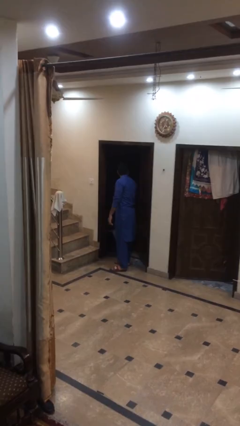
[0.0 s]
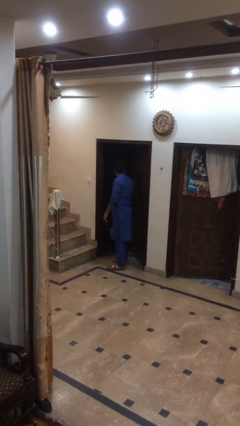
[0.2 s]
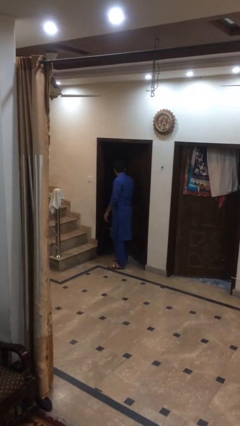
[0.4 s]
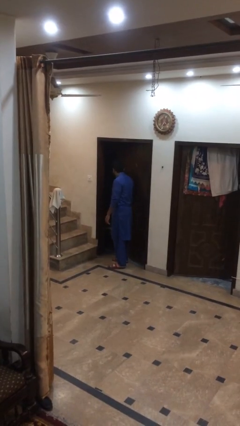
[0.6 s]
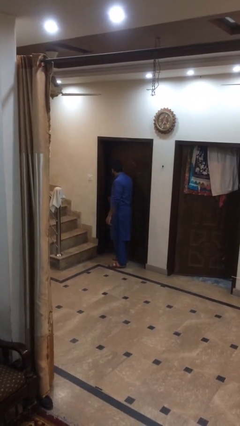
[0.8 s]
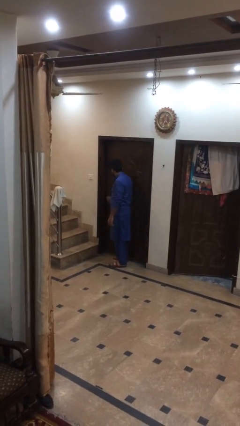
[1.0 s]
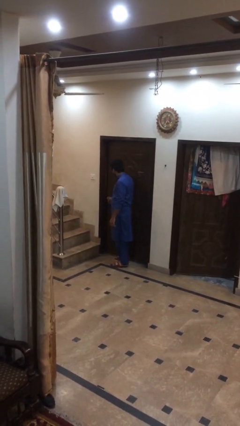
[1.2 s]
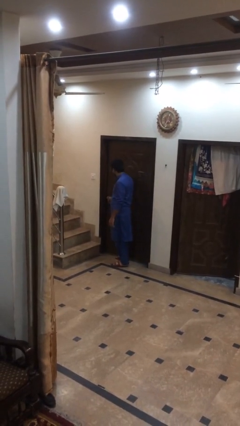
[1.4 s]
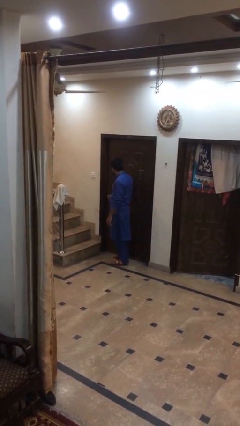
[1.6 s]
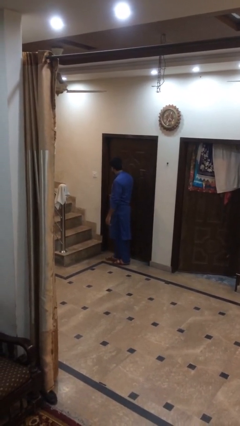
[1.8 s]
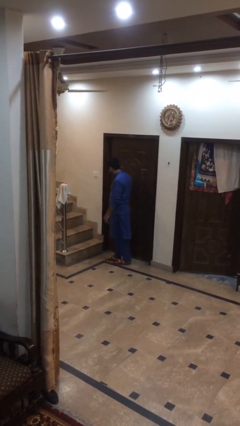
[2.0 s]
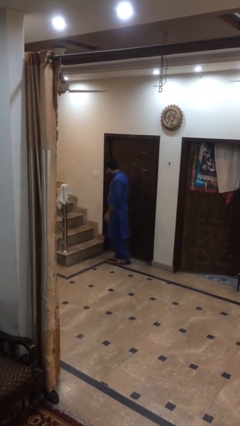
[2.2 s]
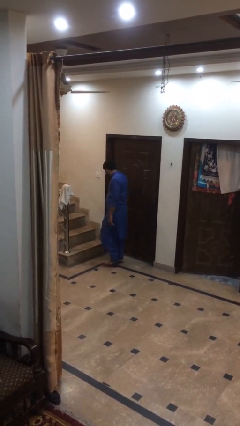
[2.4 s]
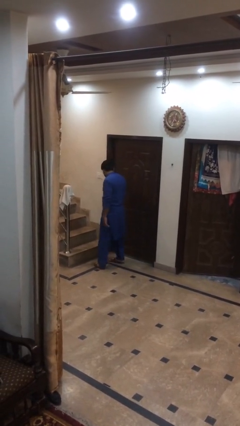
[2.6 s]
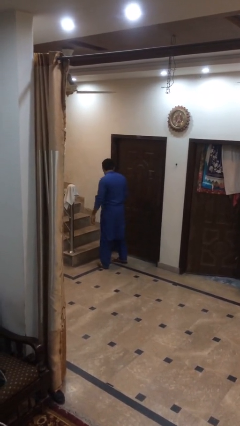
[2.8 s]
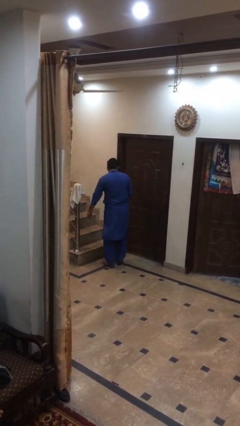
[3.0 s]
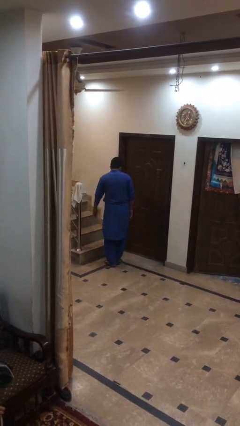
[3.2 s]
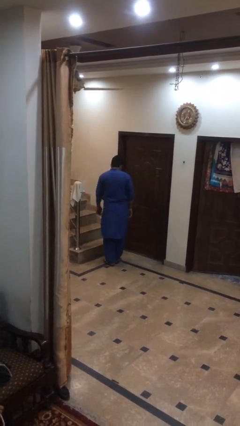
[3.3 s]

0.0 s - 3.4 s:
person closes facility door

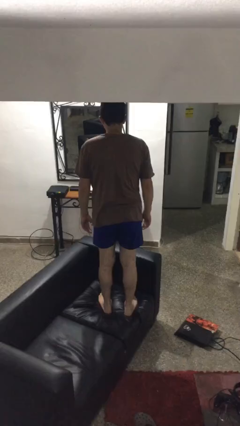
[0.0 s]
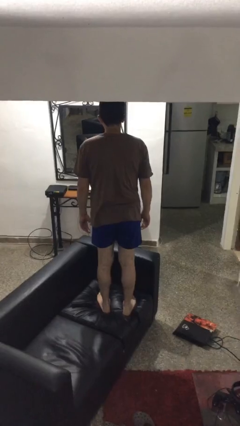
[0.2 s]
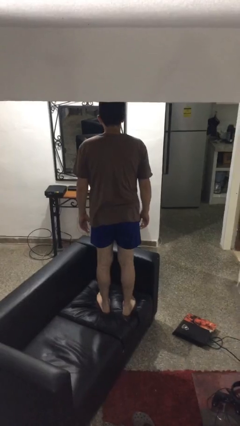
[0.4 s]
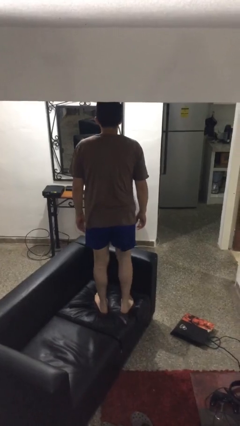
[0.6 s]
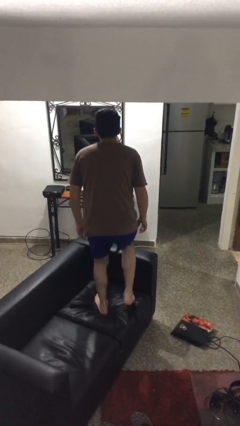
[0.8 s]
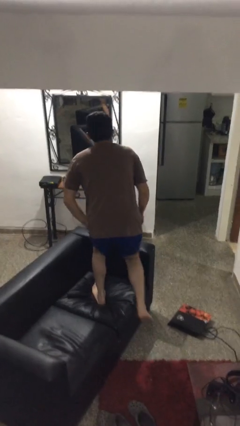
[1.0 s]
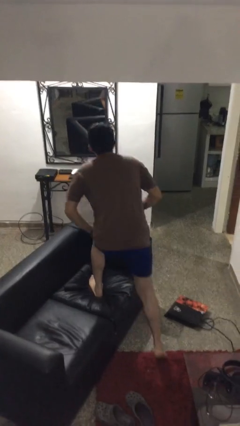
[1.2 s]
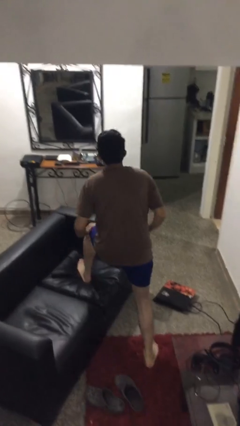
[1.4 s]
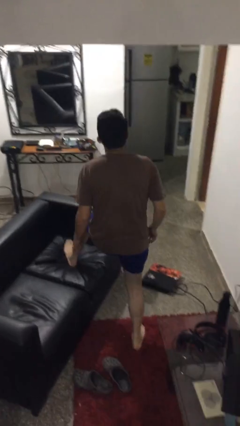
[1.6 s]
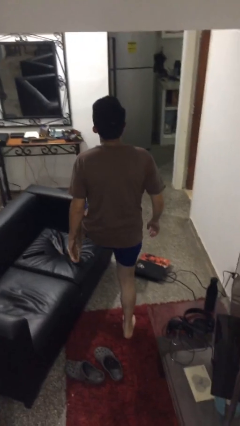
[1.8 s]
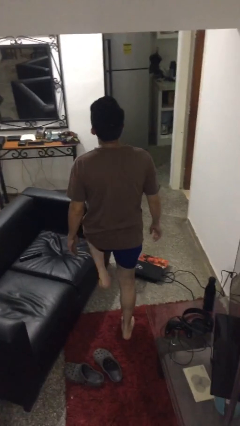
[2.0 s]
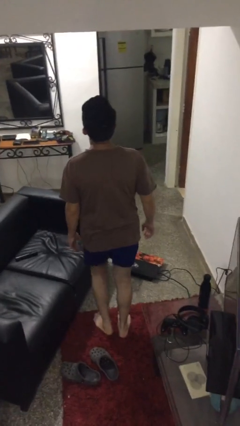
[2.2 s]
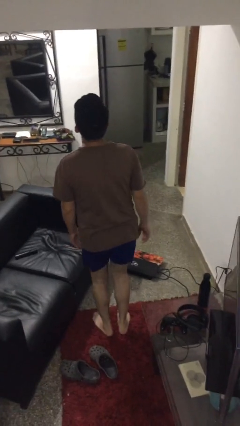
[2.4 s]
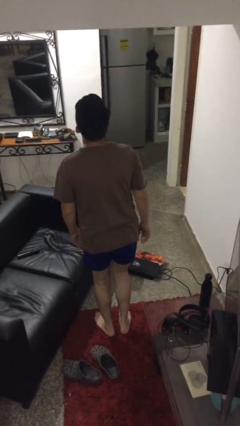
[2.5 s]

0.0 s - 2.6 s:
person climbs off couch

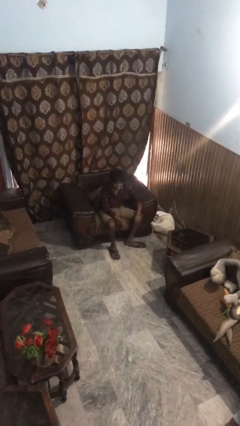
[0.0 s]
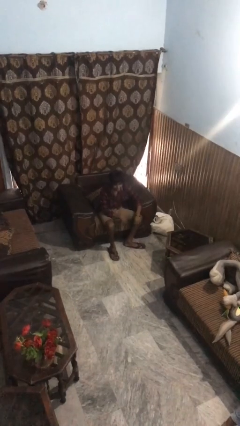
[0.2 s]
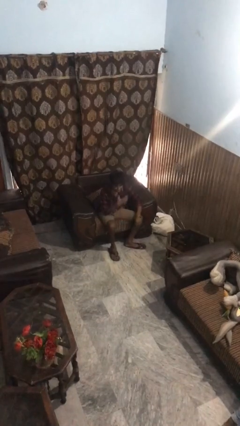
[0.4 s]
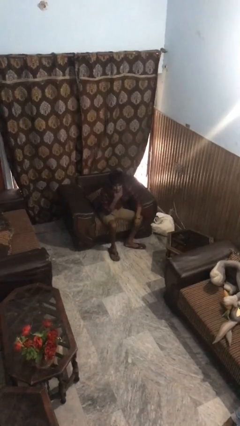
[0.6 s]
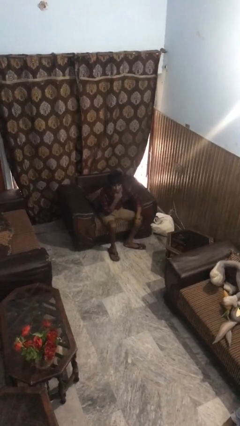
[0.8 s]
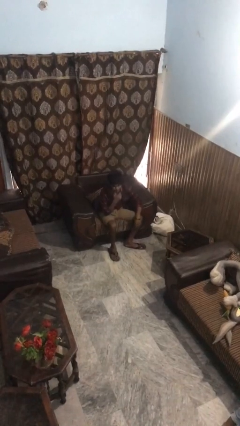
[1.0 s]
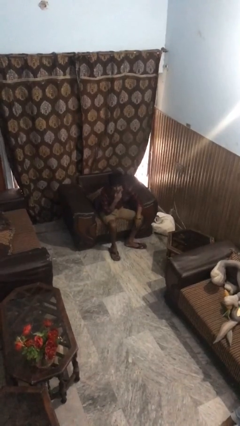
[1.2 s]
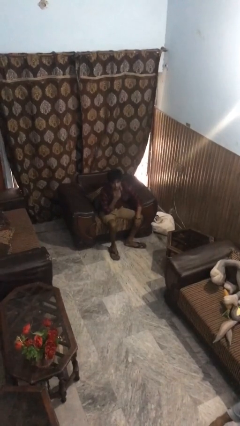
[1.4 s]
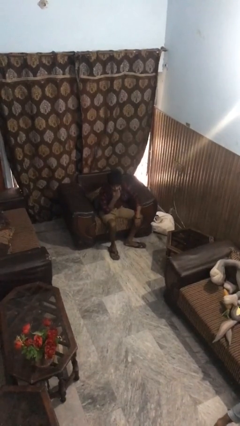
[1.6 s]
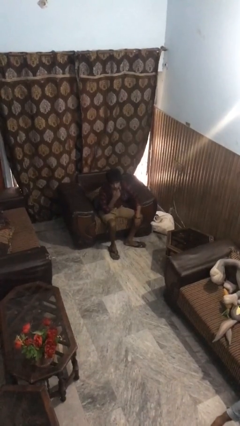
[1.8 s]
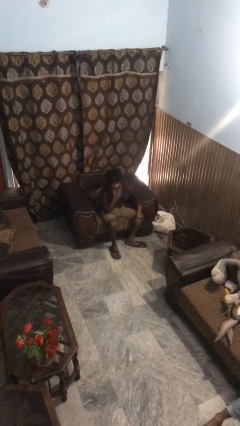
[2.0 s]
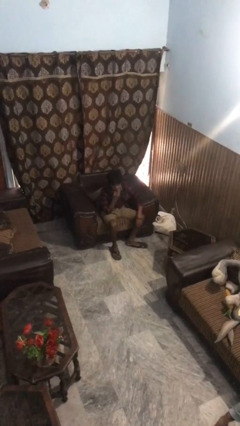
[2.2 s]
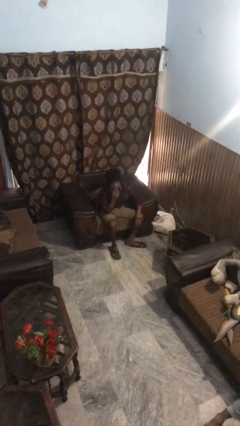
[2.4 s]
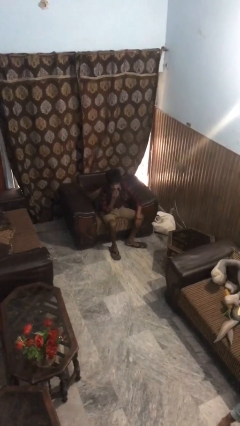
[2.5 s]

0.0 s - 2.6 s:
person strokes chin

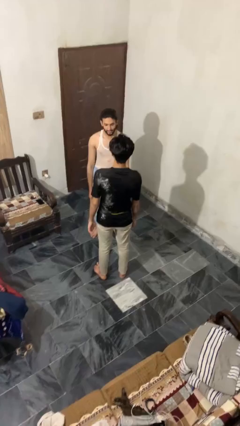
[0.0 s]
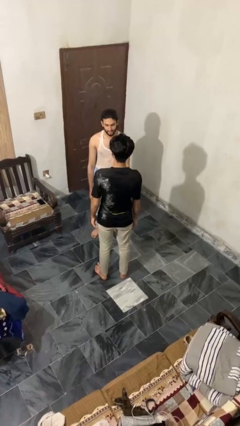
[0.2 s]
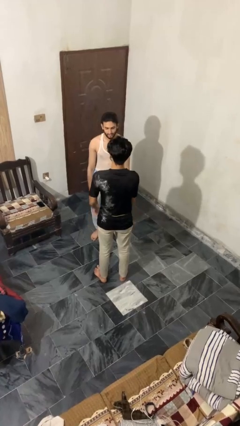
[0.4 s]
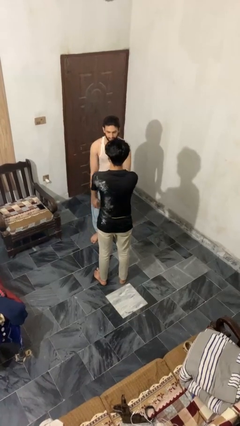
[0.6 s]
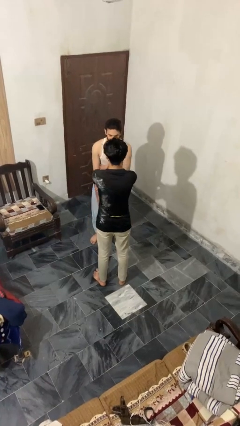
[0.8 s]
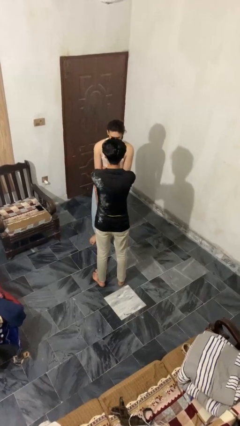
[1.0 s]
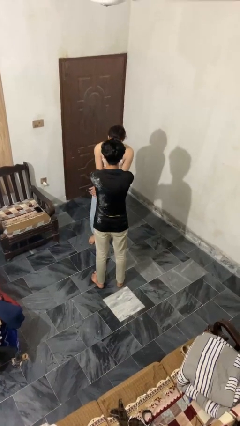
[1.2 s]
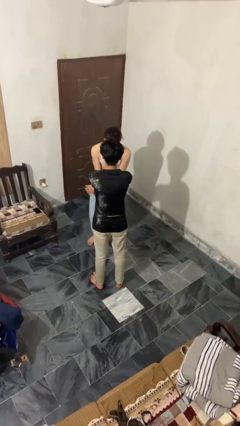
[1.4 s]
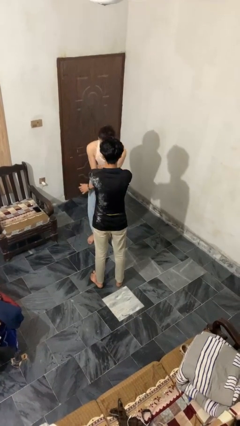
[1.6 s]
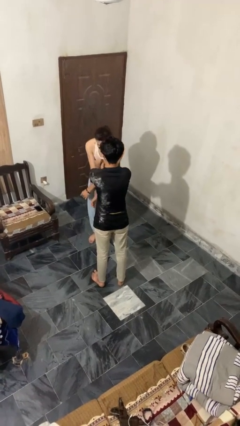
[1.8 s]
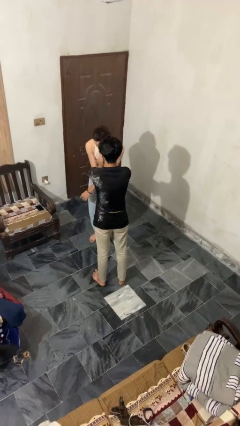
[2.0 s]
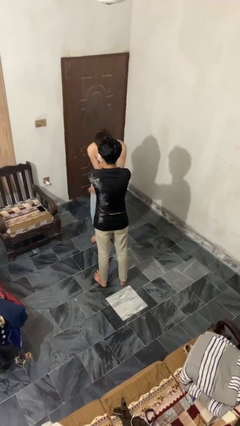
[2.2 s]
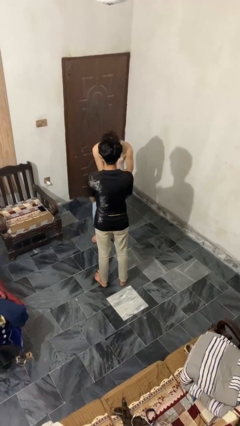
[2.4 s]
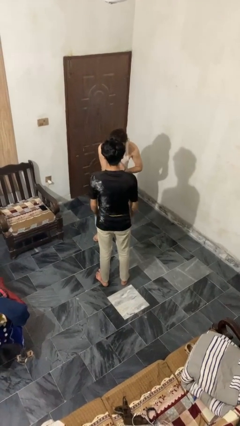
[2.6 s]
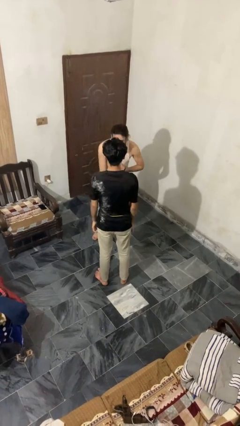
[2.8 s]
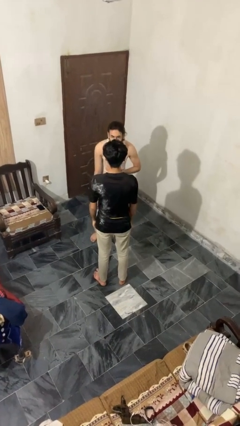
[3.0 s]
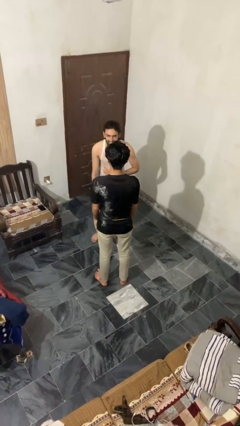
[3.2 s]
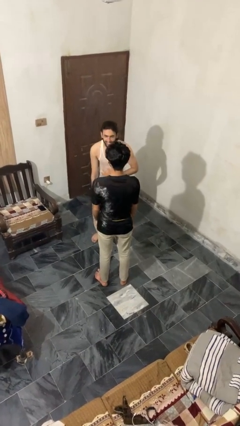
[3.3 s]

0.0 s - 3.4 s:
person tickles person

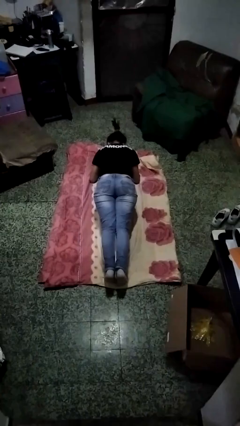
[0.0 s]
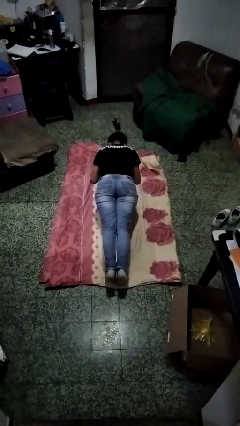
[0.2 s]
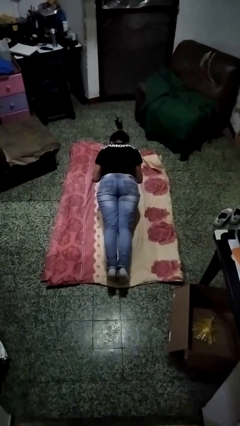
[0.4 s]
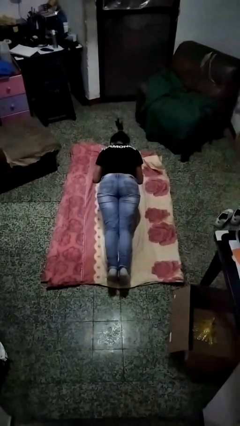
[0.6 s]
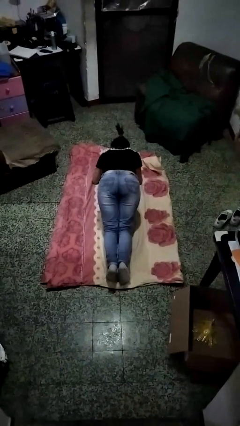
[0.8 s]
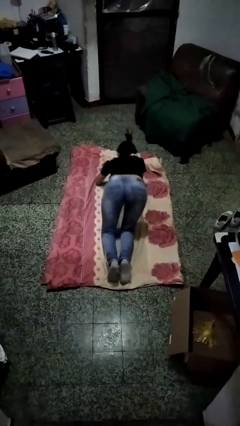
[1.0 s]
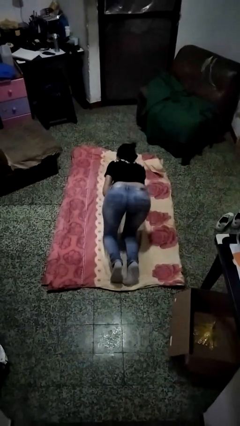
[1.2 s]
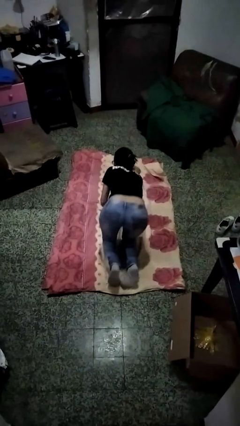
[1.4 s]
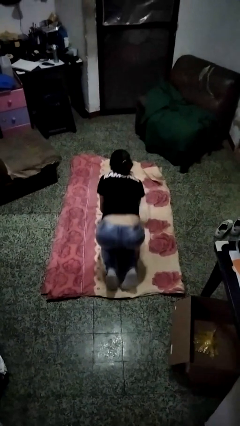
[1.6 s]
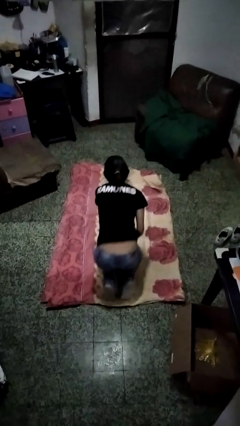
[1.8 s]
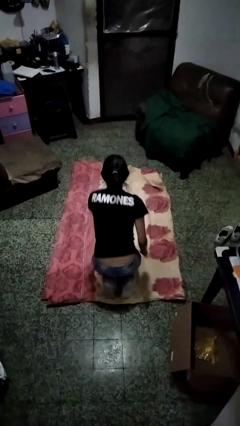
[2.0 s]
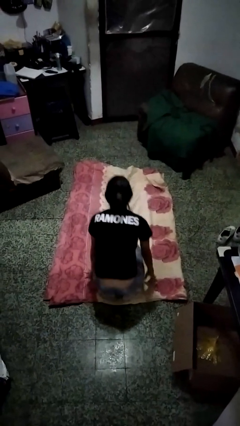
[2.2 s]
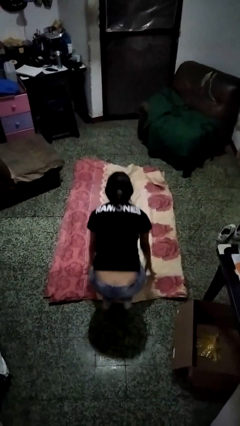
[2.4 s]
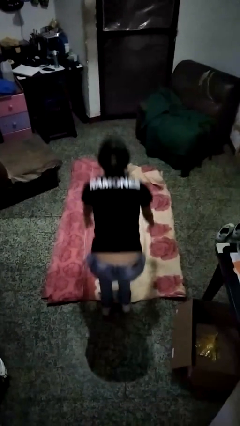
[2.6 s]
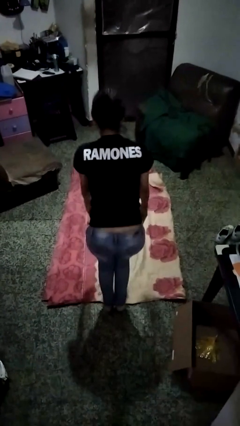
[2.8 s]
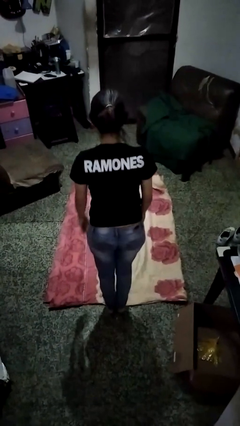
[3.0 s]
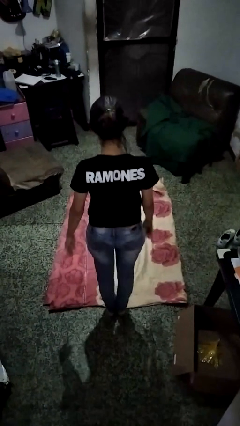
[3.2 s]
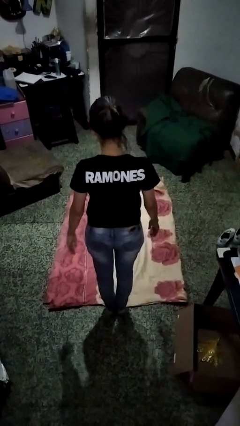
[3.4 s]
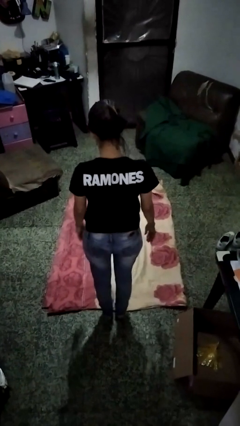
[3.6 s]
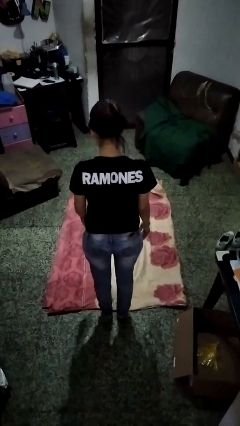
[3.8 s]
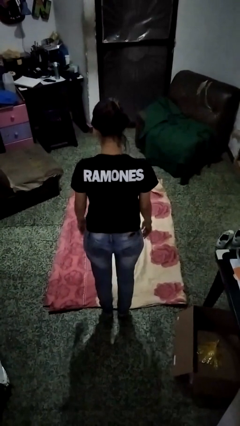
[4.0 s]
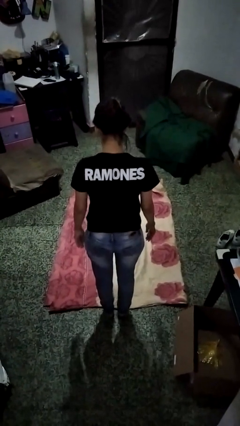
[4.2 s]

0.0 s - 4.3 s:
person stands up from floor

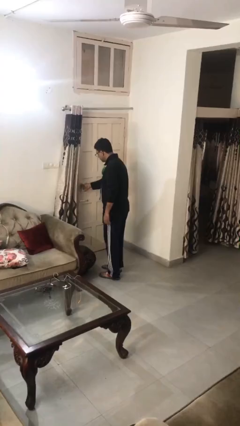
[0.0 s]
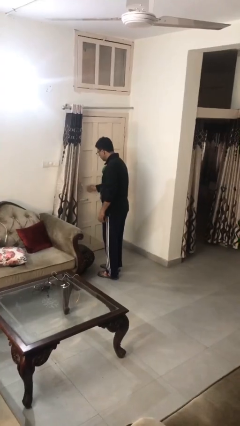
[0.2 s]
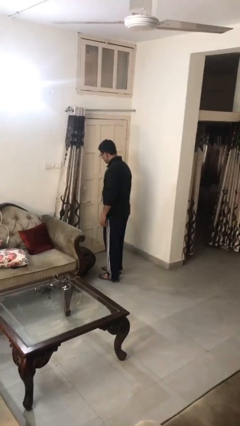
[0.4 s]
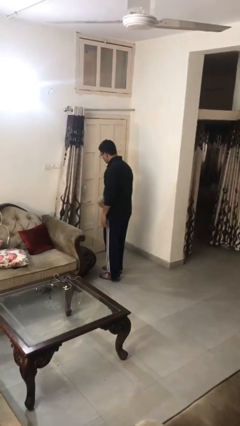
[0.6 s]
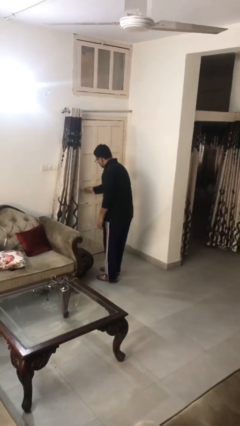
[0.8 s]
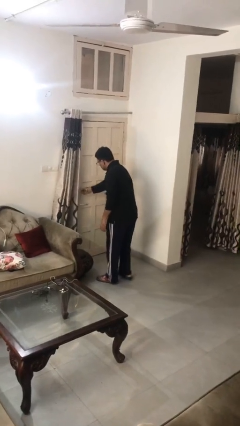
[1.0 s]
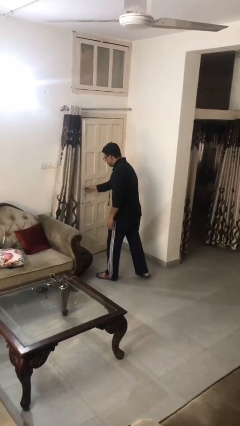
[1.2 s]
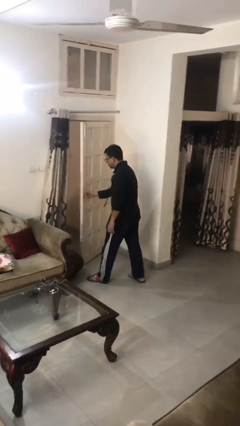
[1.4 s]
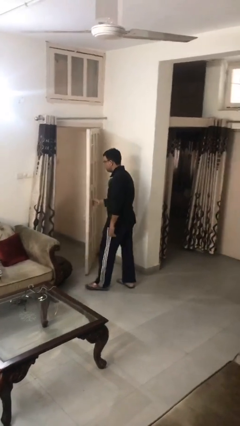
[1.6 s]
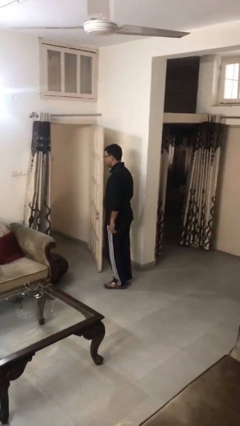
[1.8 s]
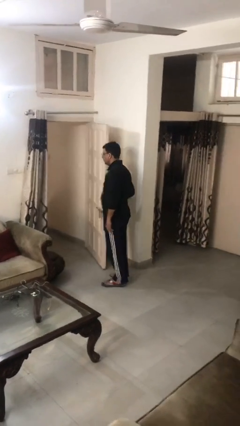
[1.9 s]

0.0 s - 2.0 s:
person opens facility door
